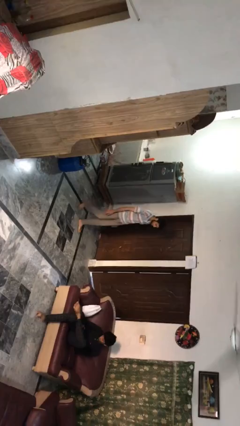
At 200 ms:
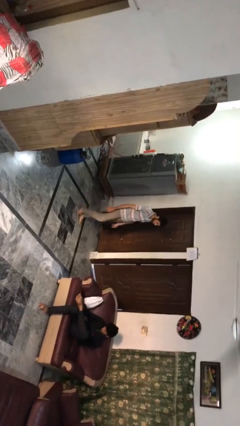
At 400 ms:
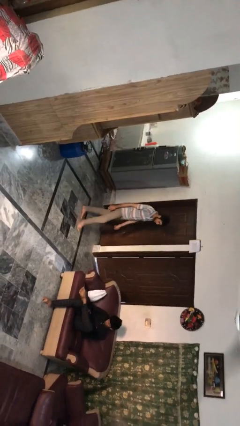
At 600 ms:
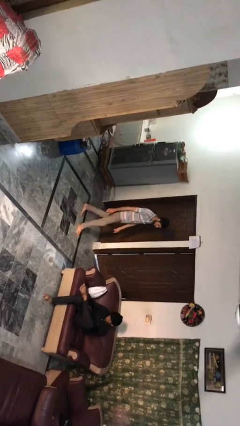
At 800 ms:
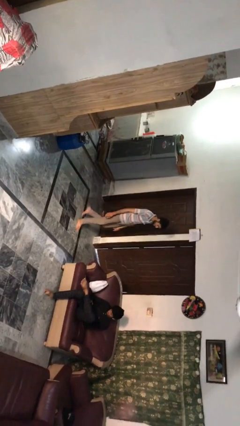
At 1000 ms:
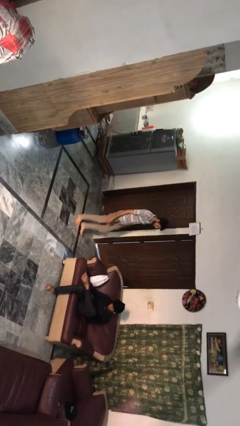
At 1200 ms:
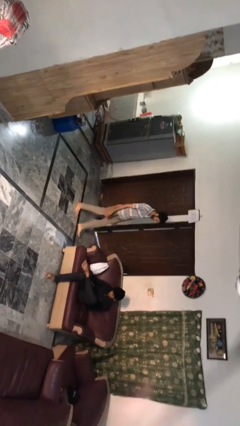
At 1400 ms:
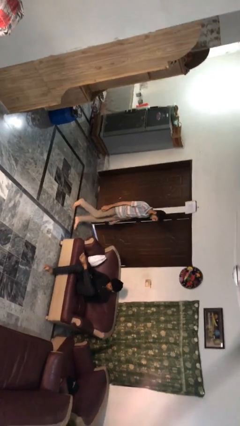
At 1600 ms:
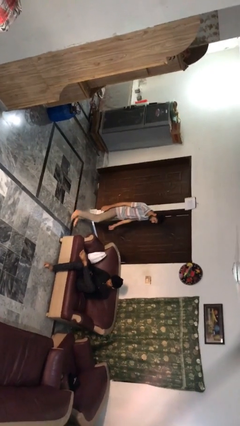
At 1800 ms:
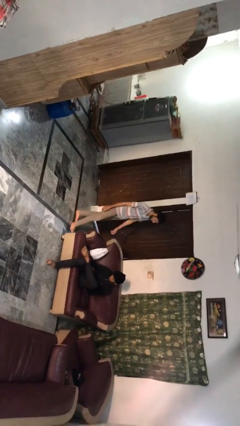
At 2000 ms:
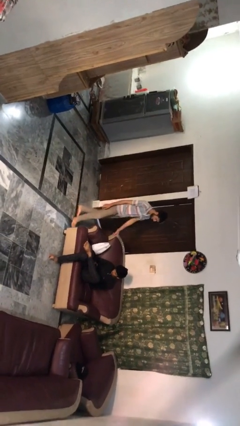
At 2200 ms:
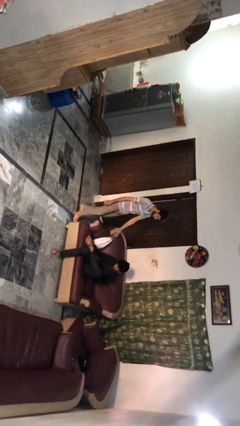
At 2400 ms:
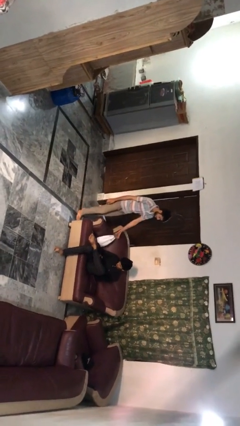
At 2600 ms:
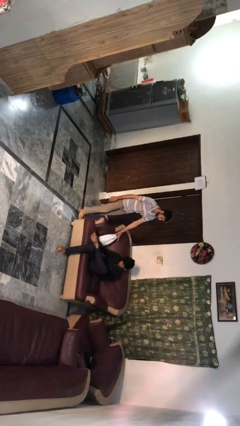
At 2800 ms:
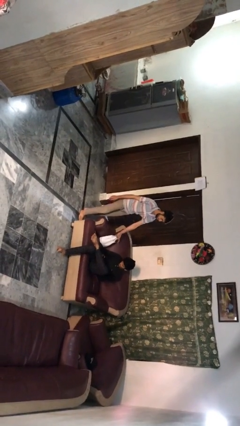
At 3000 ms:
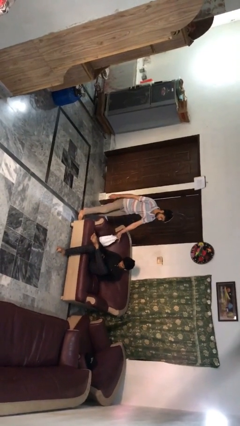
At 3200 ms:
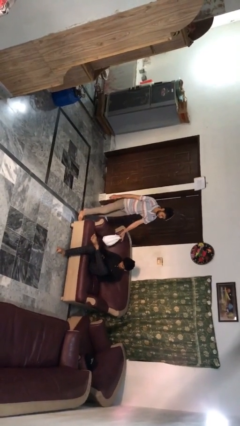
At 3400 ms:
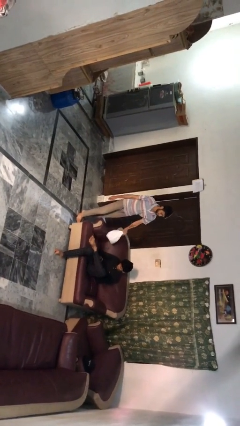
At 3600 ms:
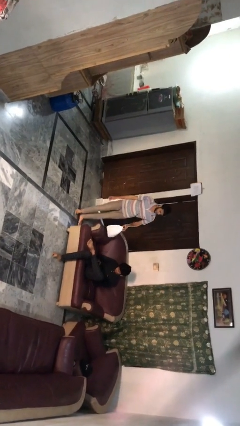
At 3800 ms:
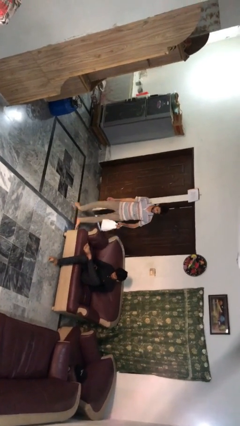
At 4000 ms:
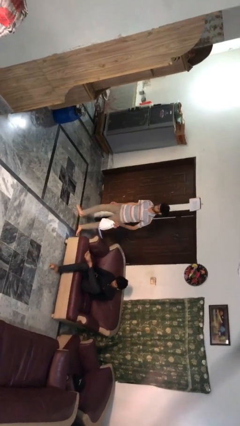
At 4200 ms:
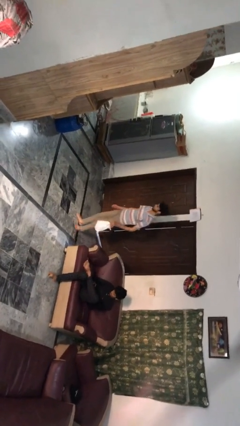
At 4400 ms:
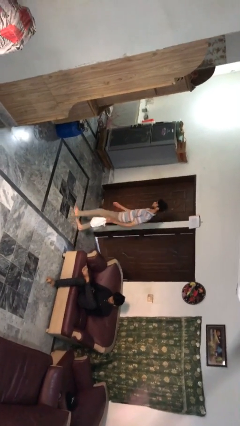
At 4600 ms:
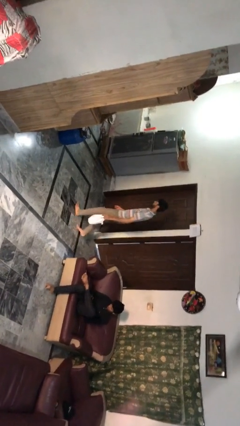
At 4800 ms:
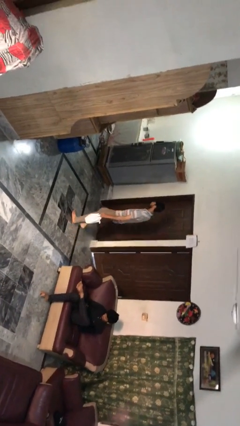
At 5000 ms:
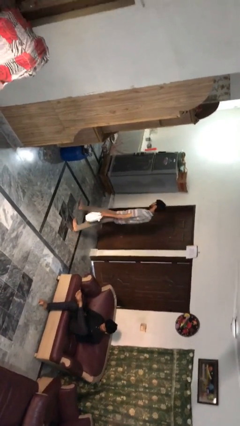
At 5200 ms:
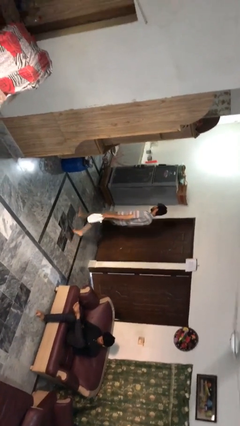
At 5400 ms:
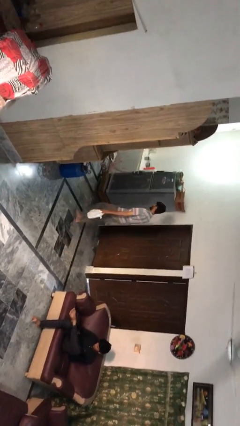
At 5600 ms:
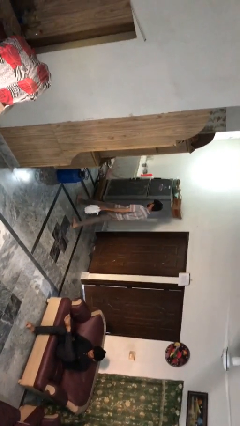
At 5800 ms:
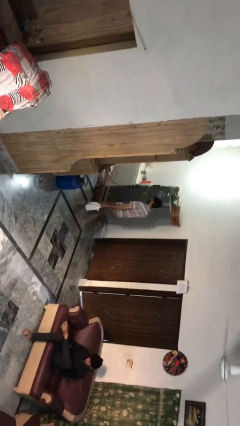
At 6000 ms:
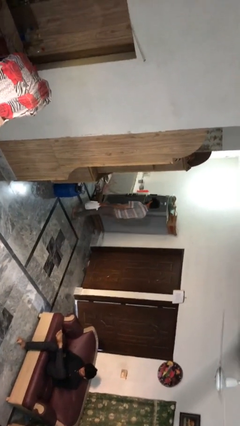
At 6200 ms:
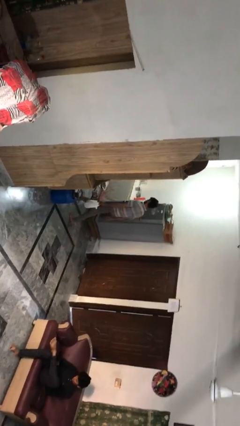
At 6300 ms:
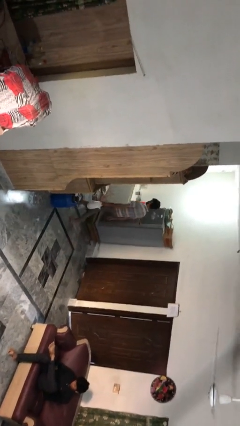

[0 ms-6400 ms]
person steals object from person

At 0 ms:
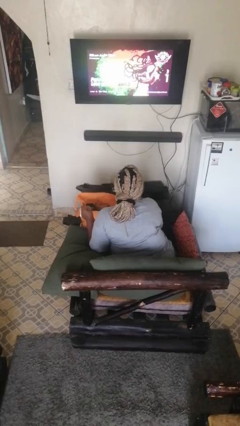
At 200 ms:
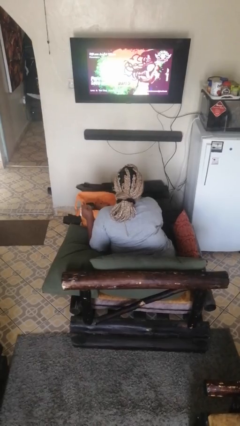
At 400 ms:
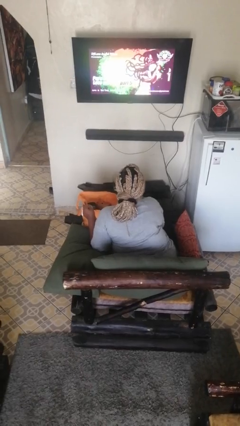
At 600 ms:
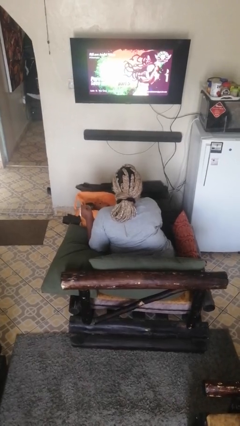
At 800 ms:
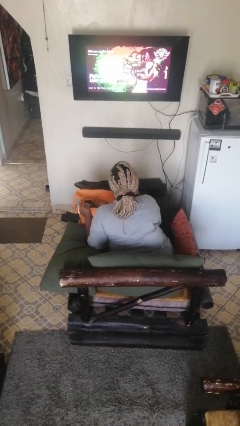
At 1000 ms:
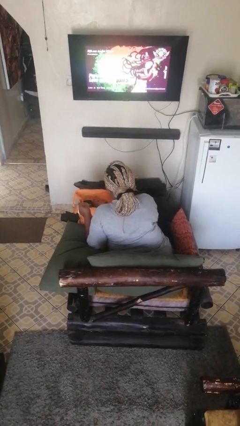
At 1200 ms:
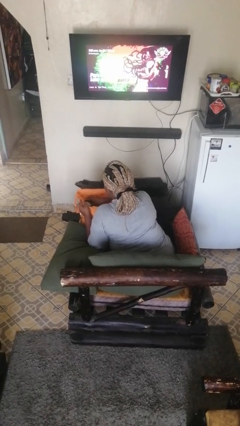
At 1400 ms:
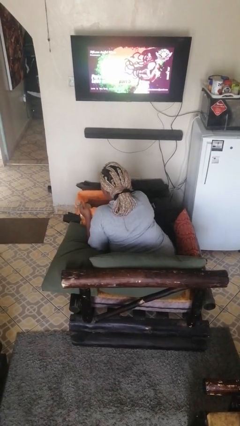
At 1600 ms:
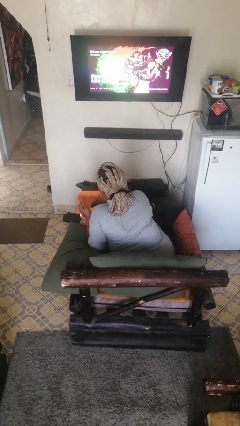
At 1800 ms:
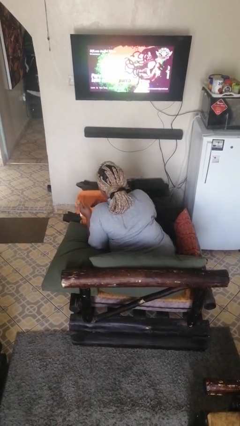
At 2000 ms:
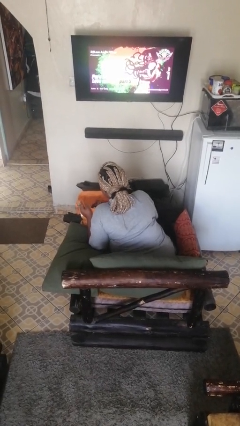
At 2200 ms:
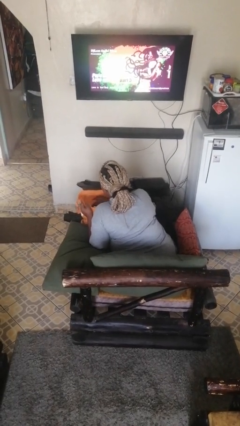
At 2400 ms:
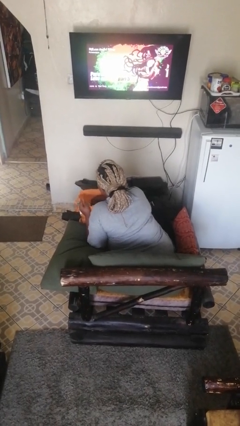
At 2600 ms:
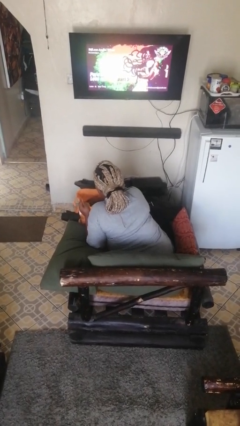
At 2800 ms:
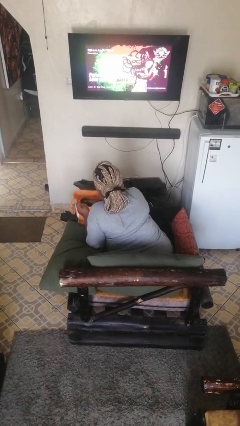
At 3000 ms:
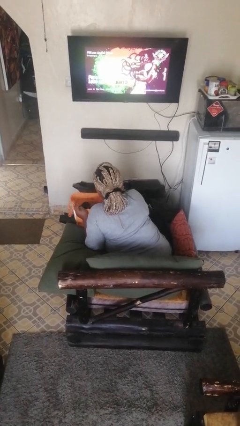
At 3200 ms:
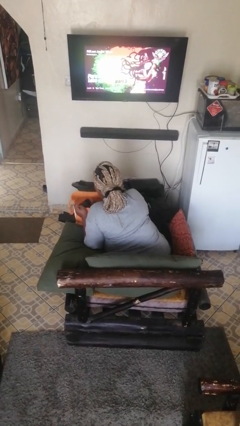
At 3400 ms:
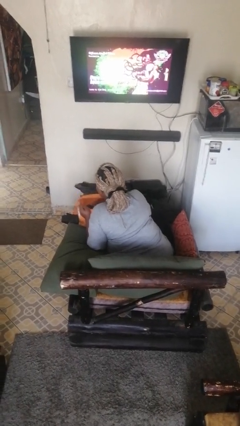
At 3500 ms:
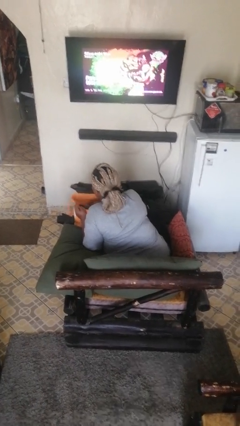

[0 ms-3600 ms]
person searches in bag

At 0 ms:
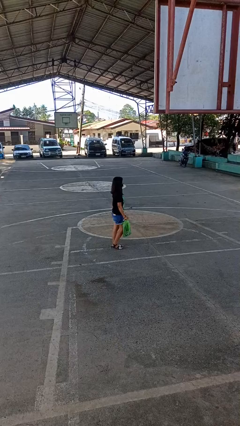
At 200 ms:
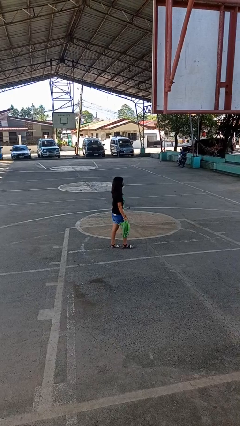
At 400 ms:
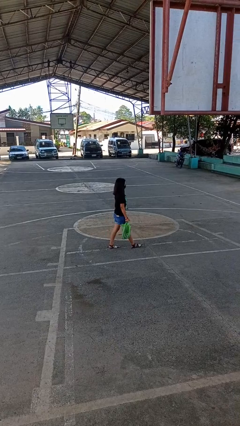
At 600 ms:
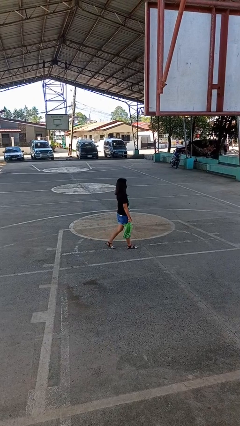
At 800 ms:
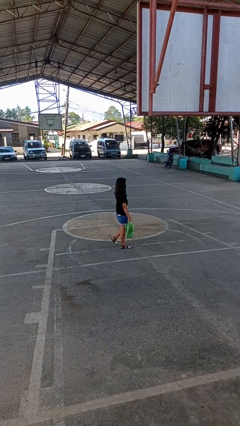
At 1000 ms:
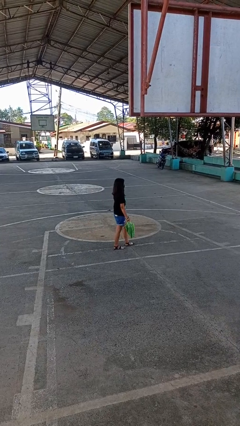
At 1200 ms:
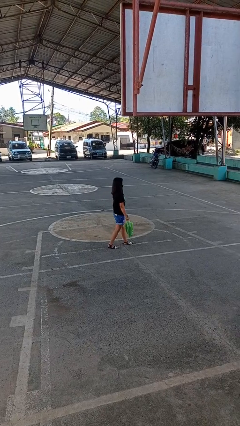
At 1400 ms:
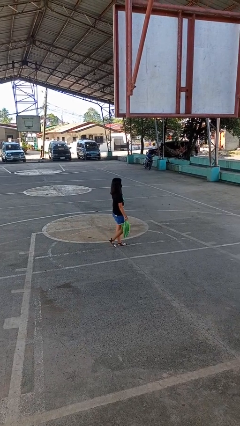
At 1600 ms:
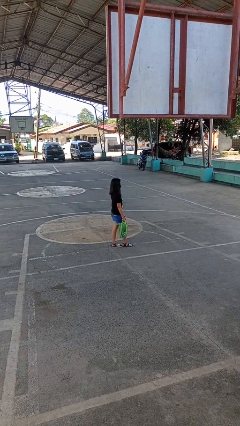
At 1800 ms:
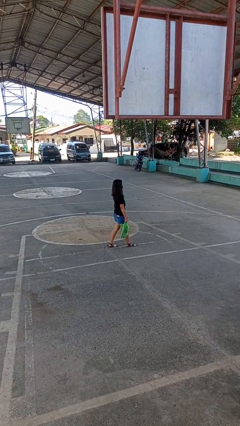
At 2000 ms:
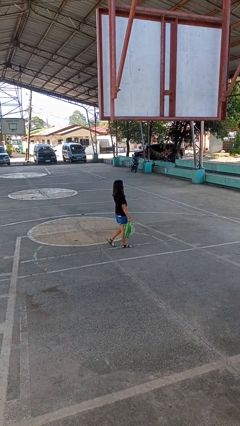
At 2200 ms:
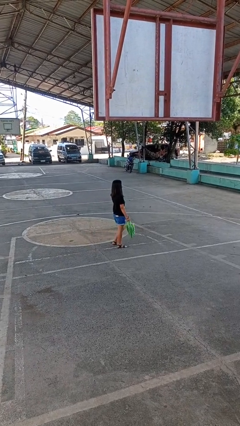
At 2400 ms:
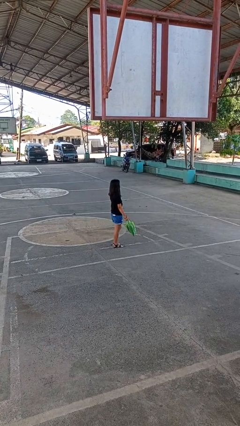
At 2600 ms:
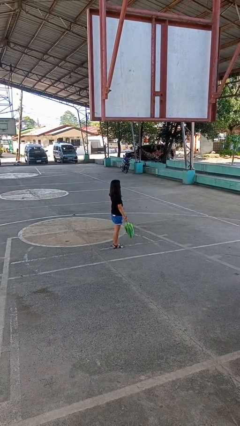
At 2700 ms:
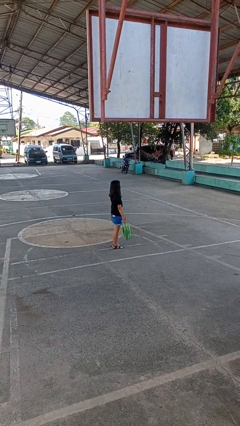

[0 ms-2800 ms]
person carries groceries

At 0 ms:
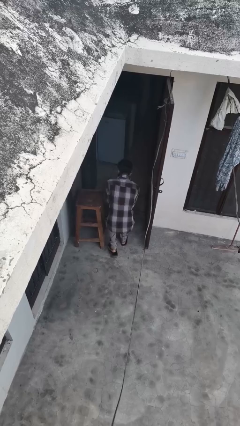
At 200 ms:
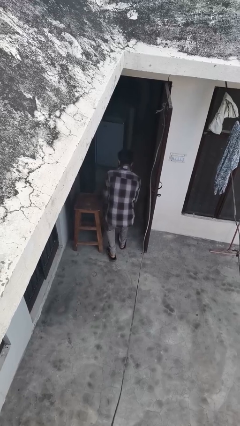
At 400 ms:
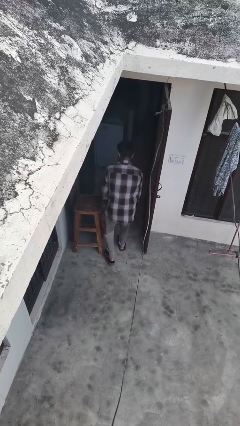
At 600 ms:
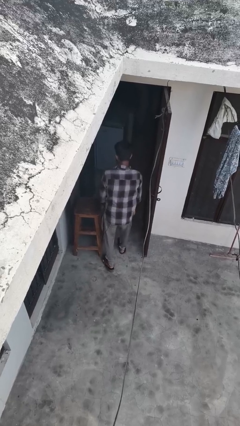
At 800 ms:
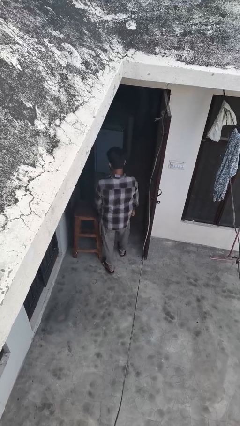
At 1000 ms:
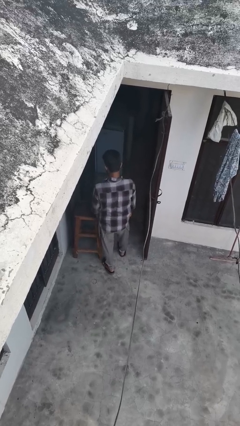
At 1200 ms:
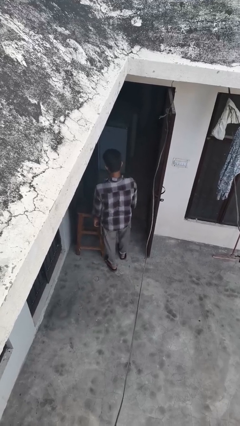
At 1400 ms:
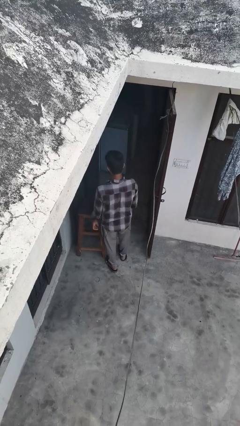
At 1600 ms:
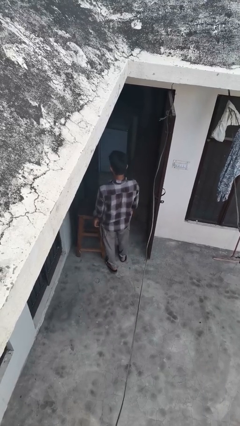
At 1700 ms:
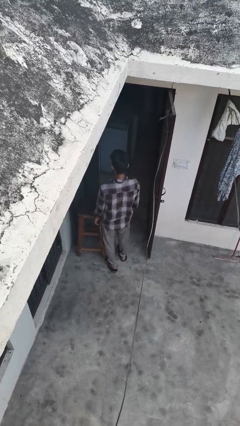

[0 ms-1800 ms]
person stands up from floor

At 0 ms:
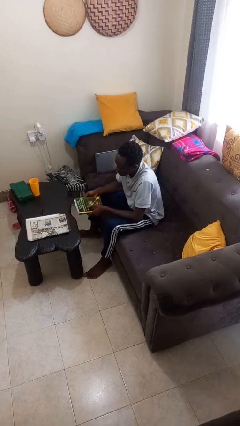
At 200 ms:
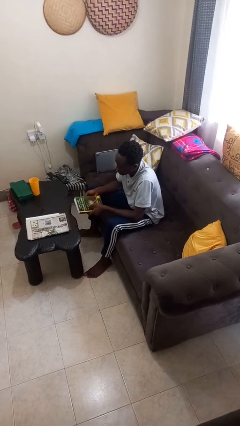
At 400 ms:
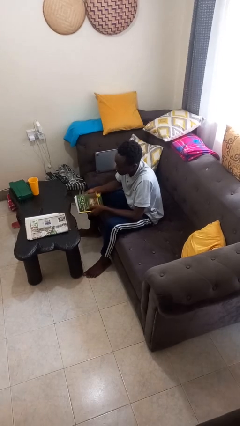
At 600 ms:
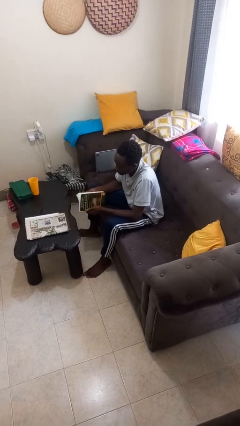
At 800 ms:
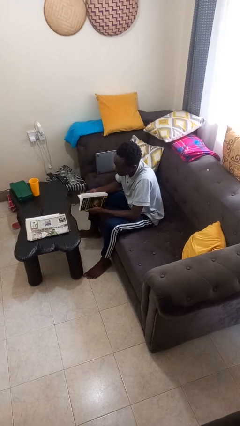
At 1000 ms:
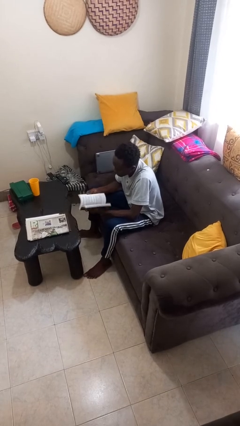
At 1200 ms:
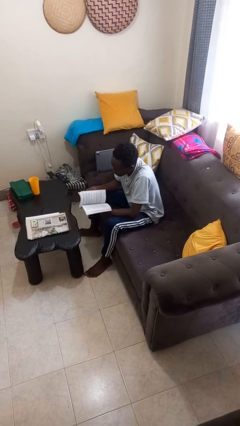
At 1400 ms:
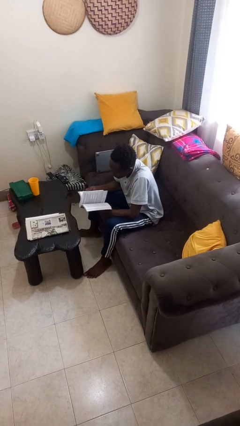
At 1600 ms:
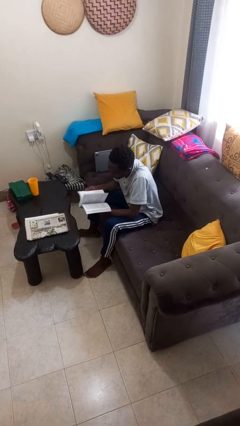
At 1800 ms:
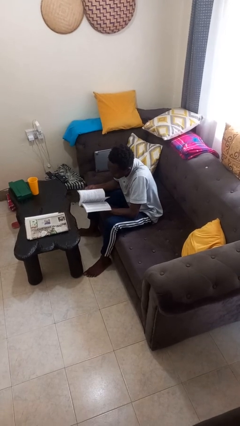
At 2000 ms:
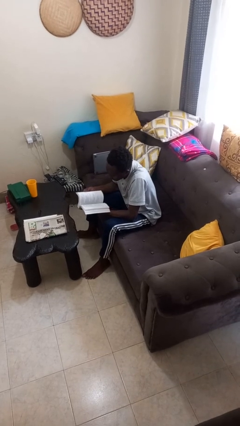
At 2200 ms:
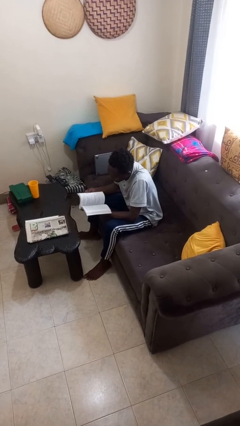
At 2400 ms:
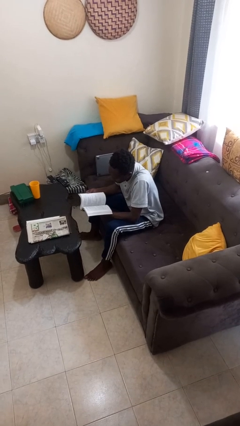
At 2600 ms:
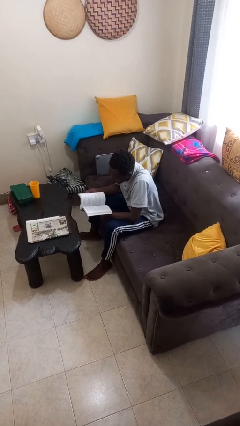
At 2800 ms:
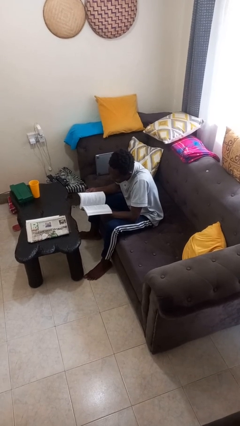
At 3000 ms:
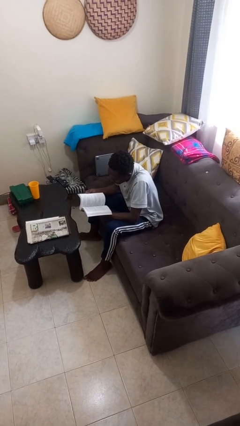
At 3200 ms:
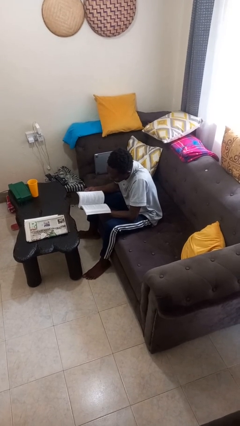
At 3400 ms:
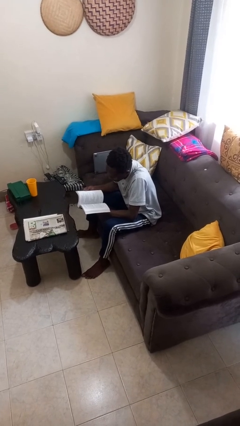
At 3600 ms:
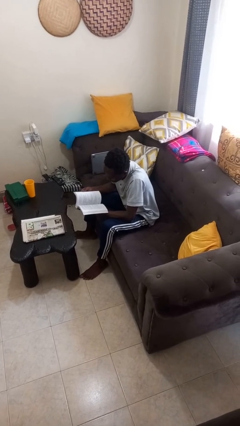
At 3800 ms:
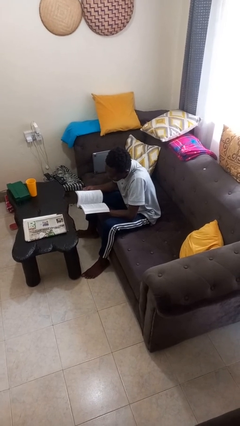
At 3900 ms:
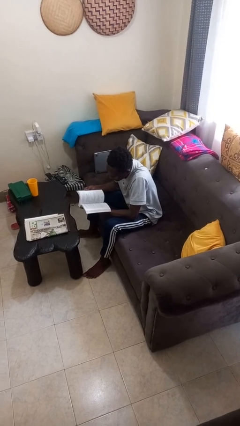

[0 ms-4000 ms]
person reads book
